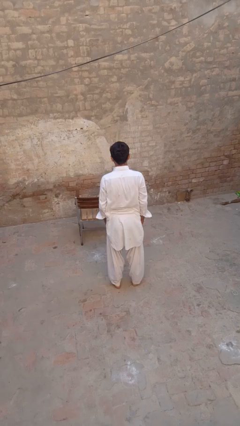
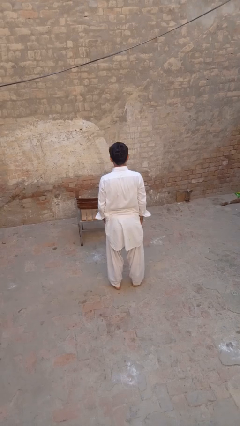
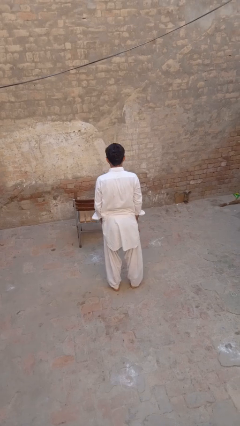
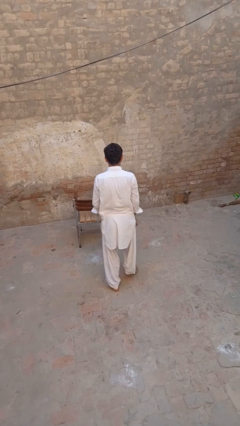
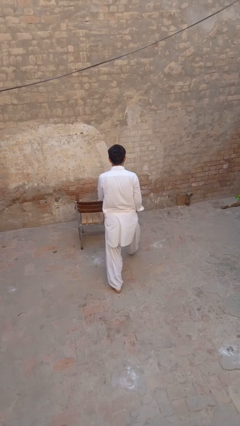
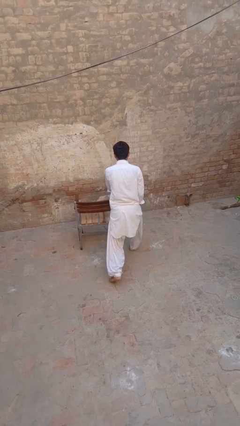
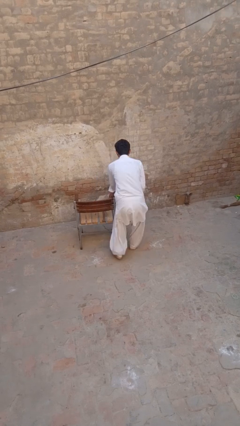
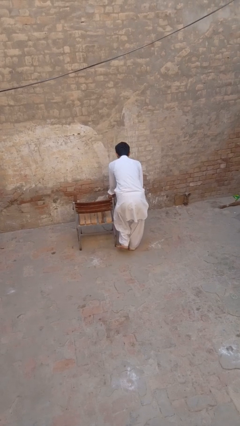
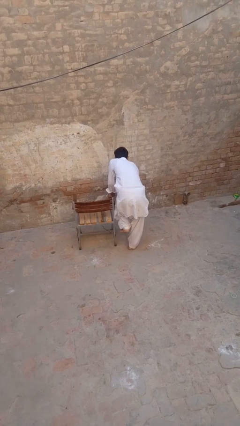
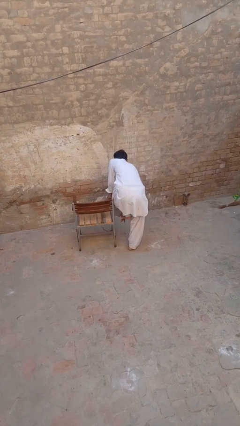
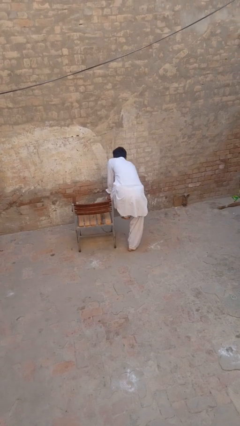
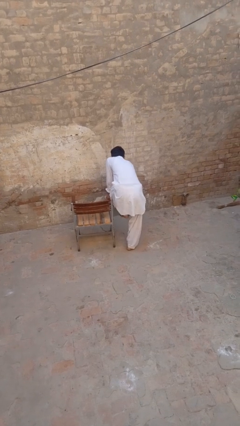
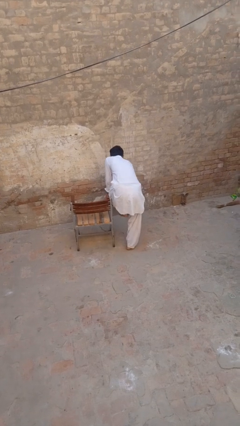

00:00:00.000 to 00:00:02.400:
person stubs toe

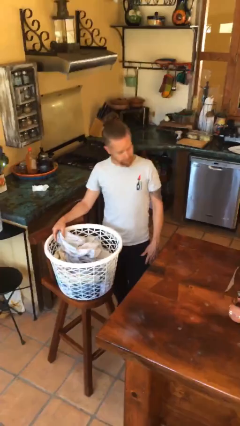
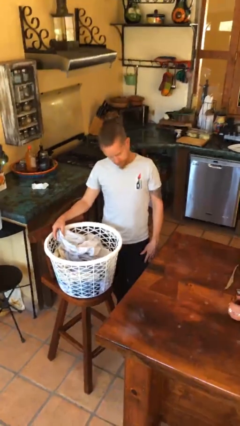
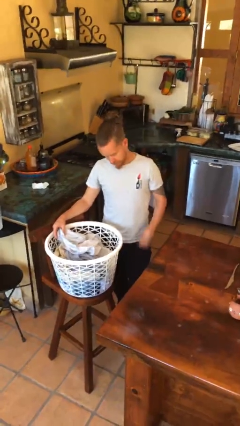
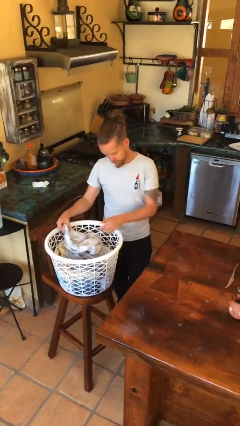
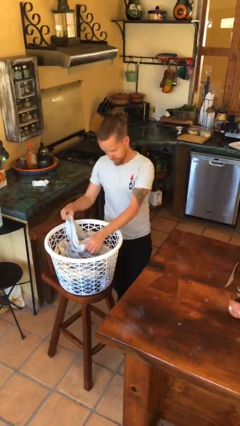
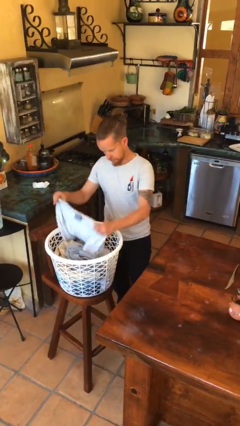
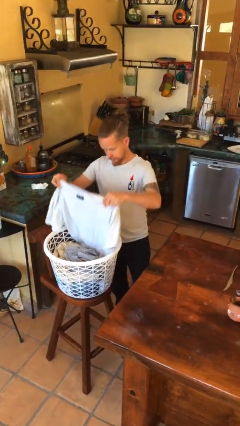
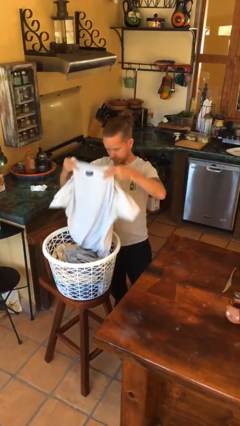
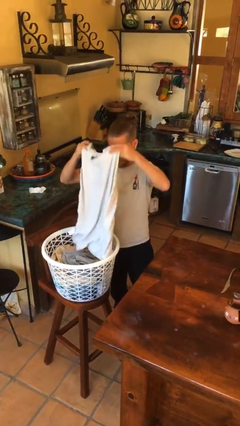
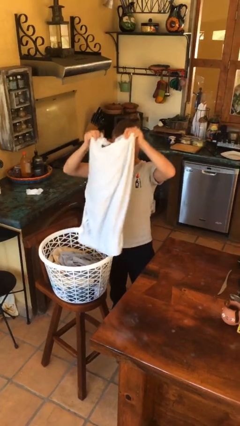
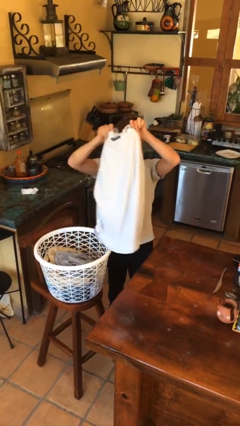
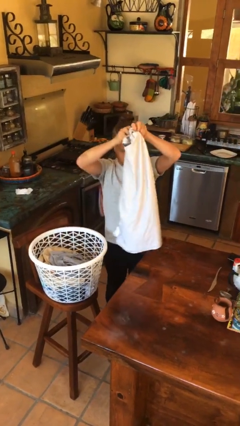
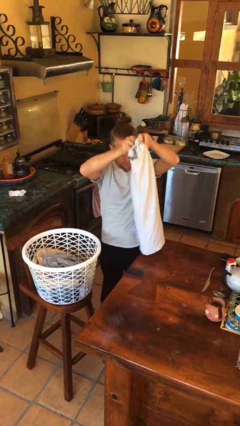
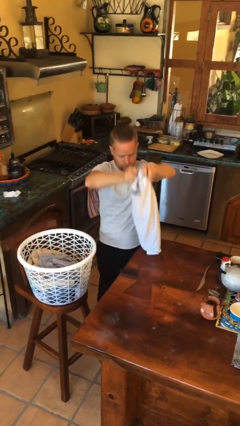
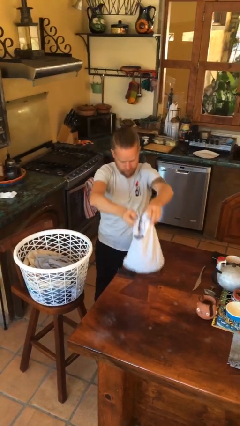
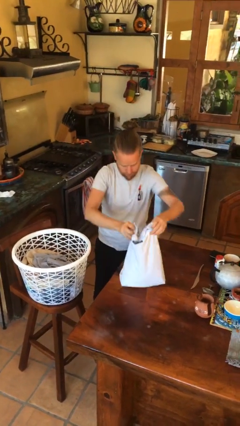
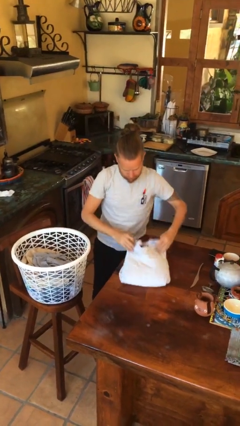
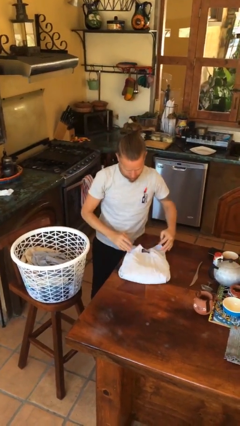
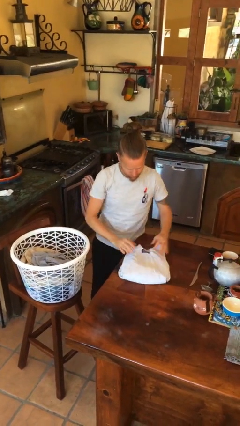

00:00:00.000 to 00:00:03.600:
person folds shirt

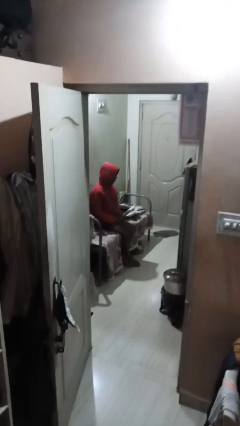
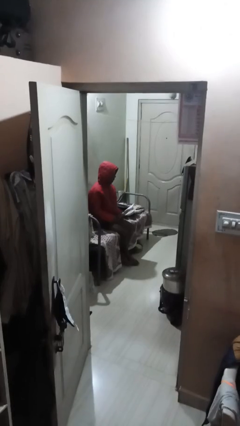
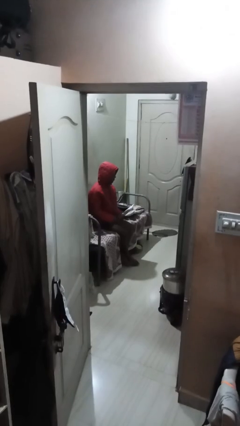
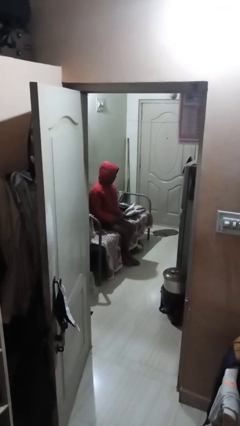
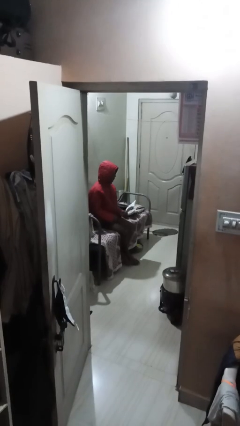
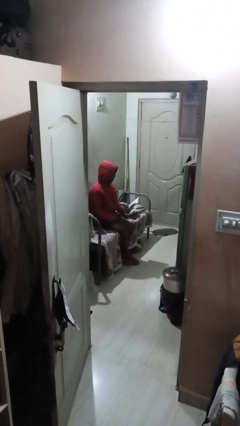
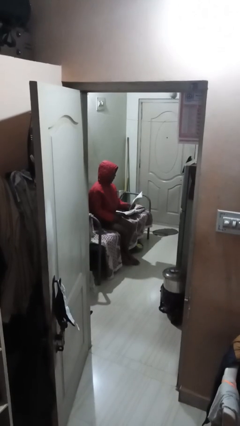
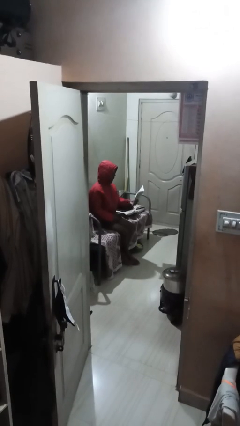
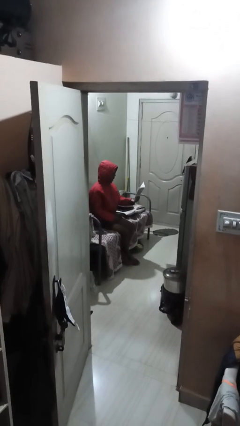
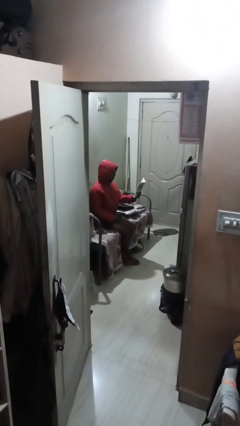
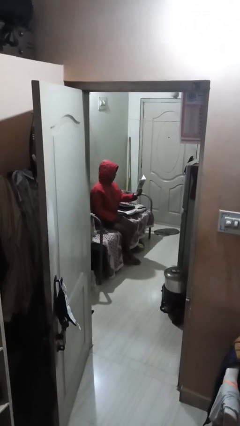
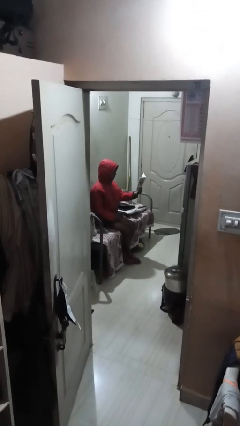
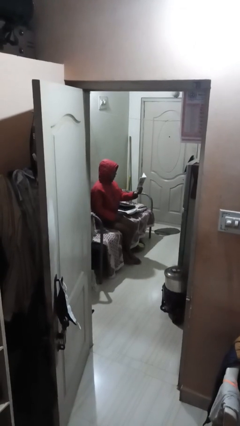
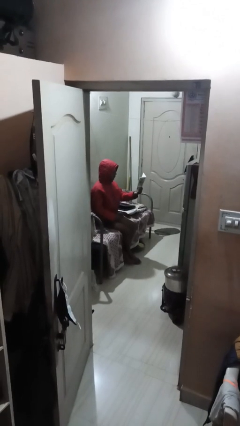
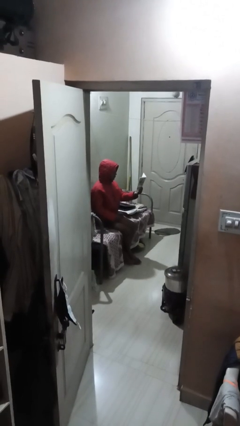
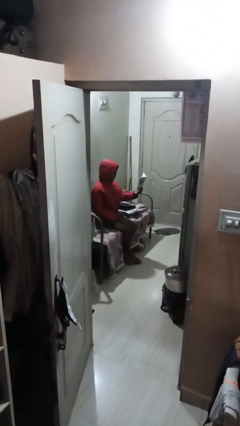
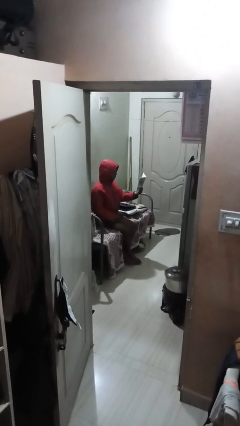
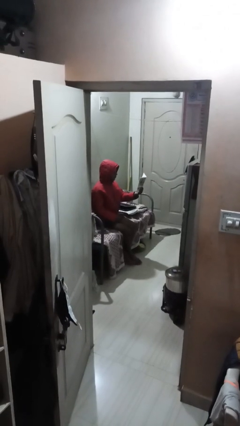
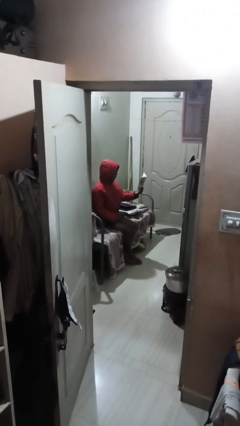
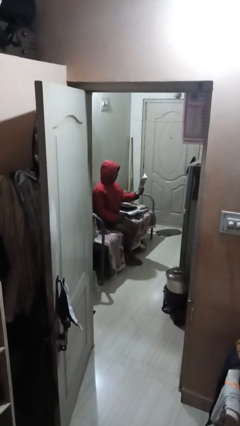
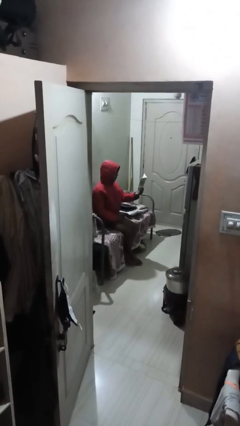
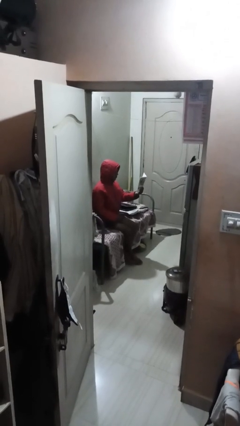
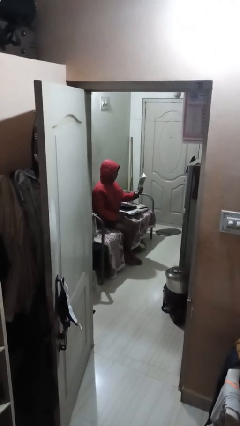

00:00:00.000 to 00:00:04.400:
person reads document

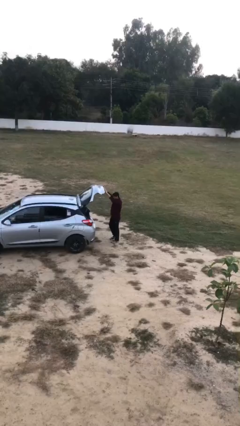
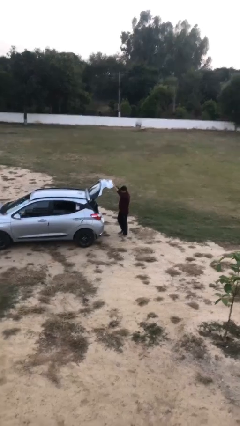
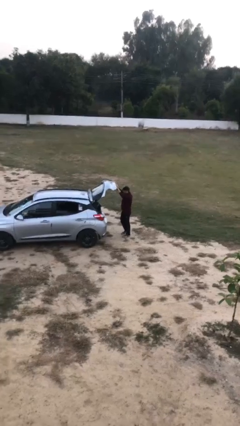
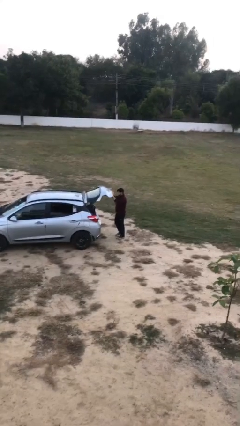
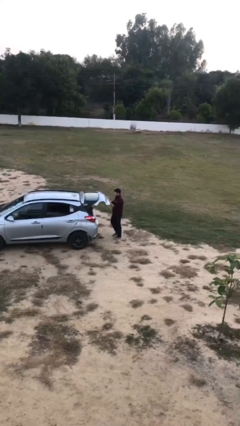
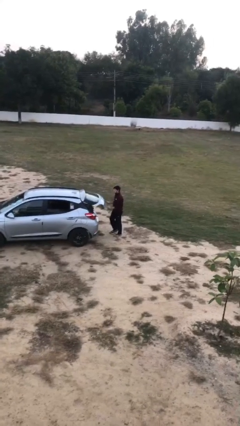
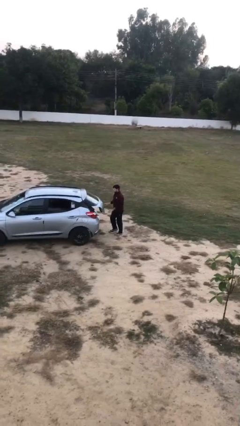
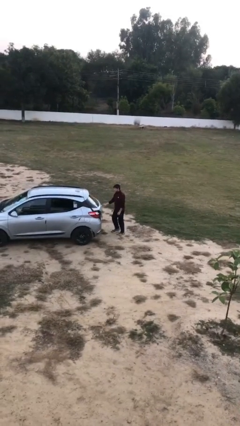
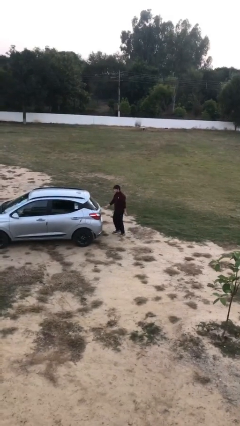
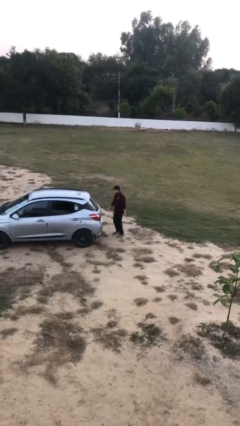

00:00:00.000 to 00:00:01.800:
person closes car trunk

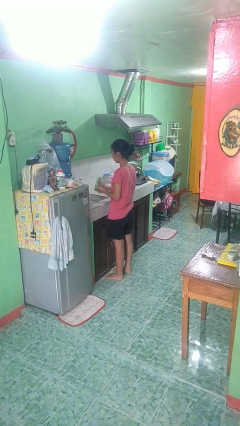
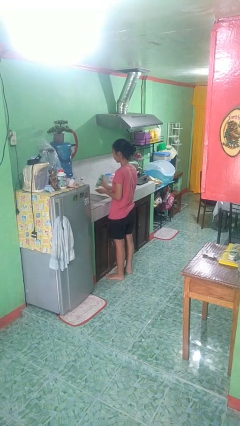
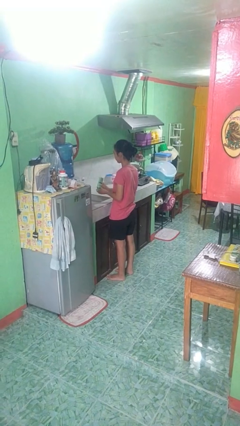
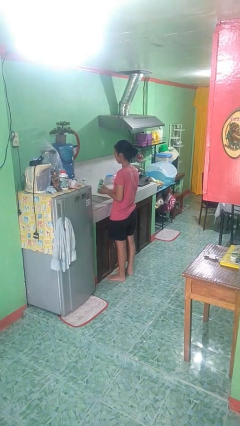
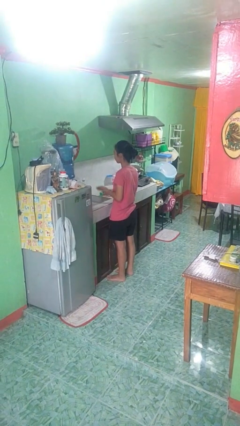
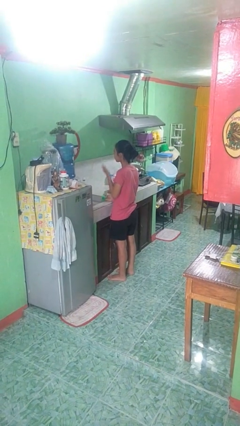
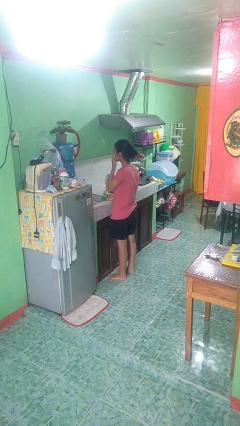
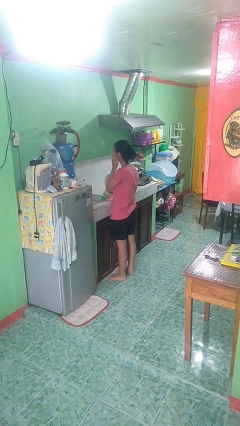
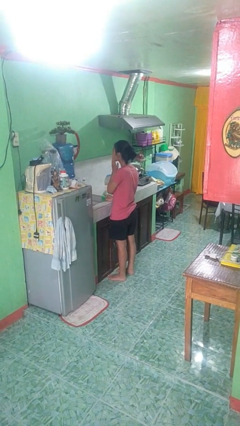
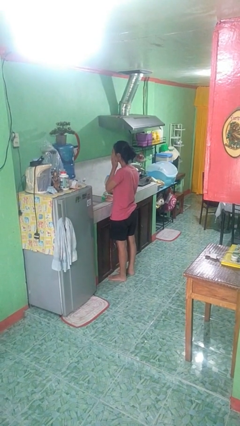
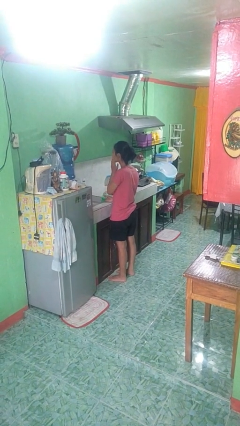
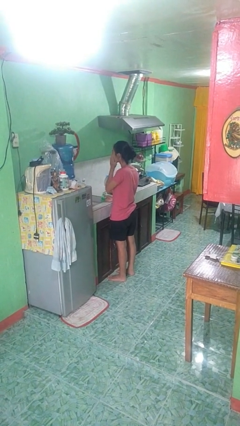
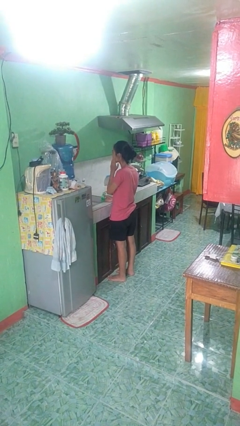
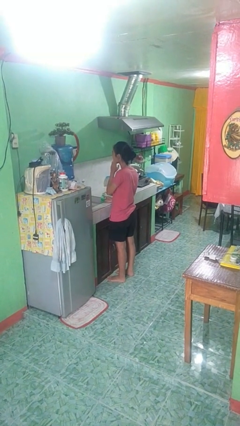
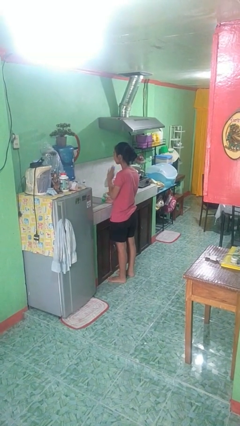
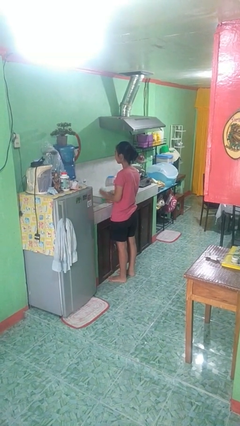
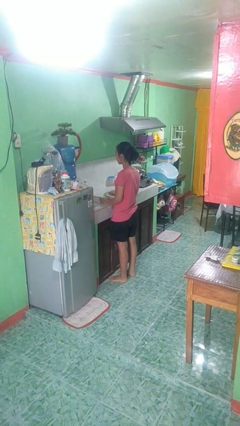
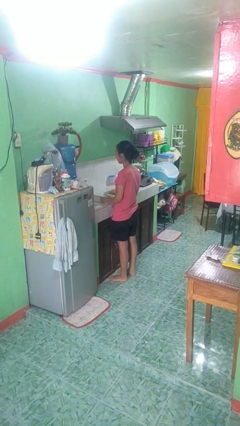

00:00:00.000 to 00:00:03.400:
person applies facial moisturizer

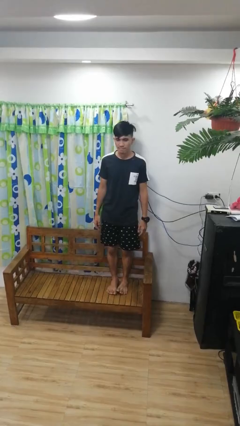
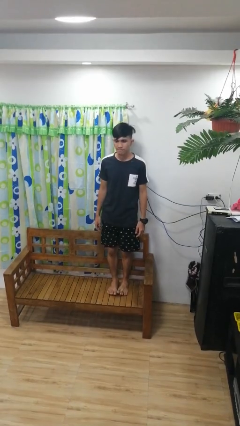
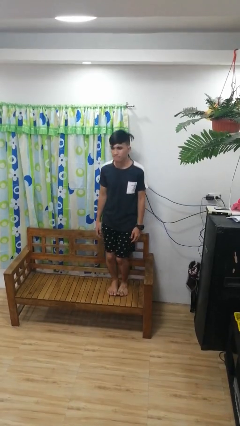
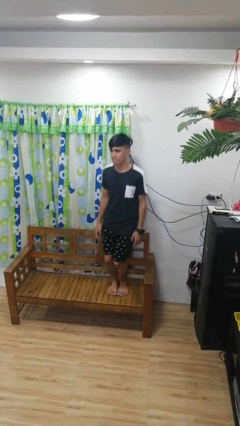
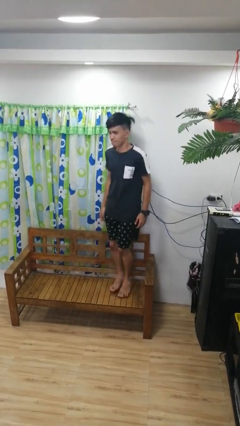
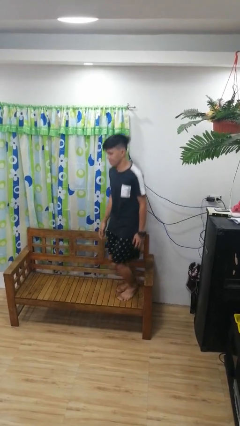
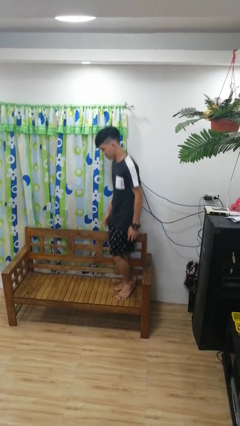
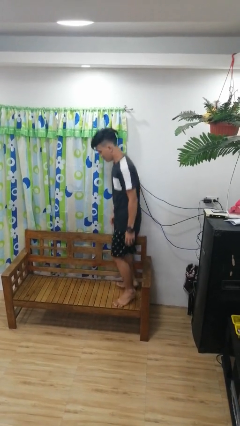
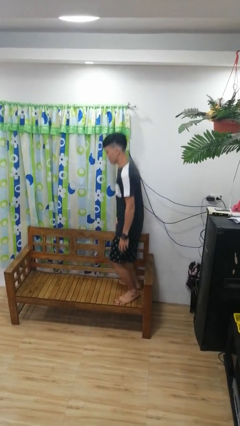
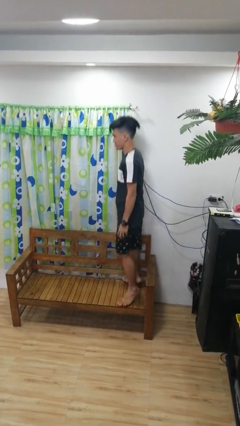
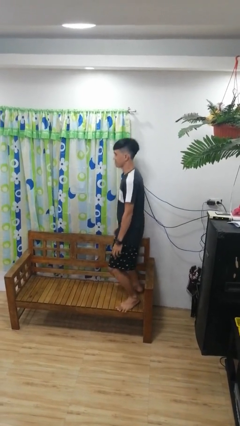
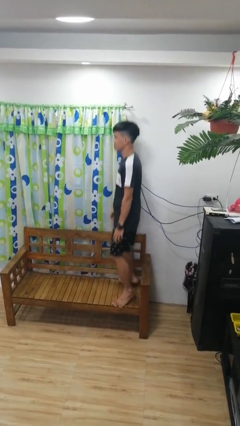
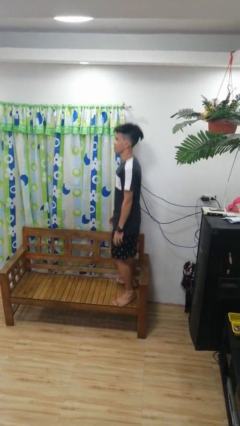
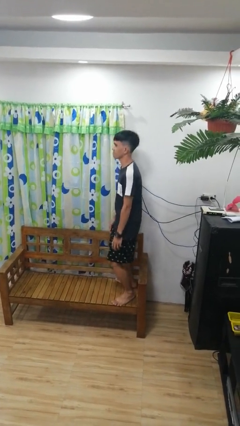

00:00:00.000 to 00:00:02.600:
person jumps on couch
